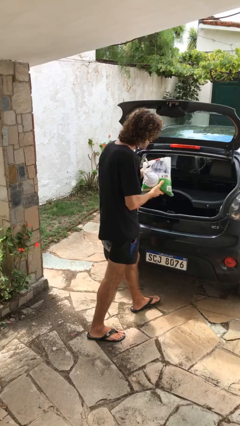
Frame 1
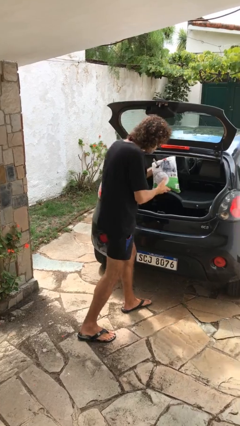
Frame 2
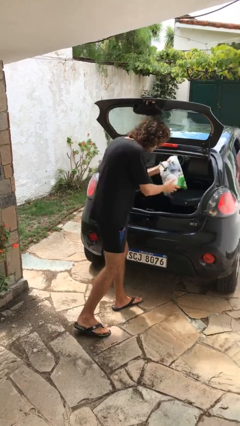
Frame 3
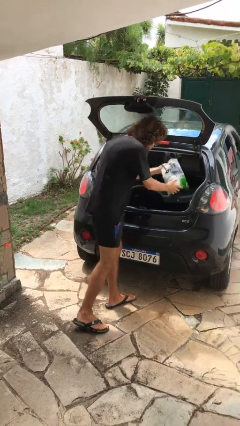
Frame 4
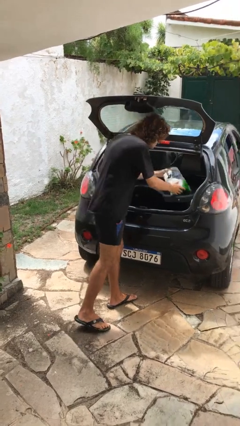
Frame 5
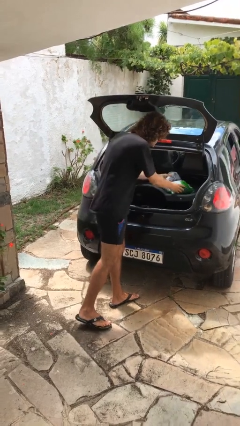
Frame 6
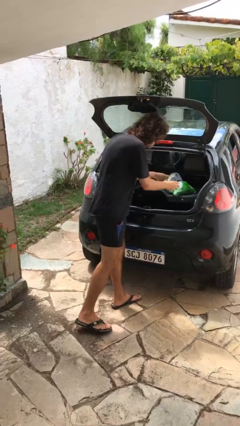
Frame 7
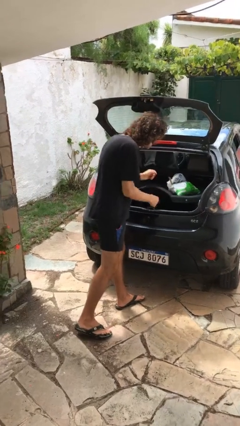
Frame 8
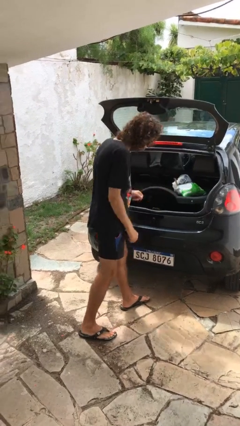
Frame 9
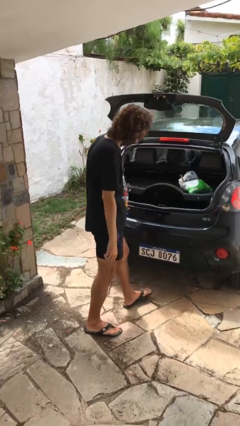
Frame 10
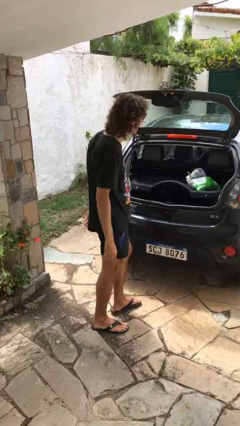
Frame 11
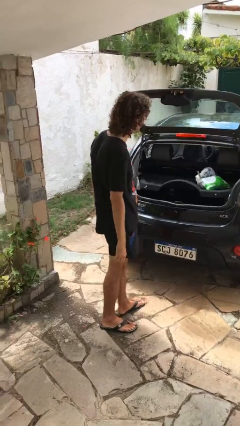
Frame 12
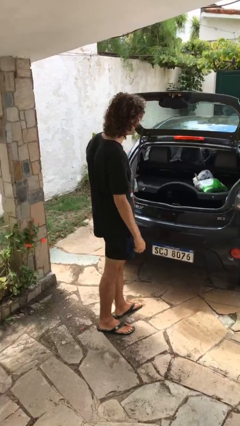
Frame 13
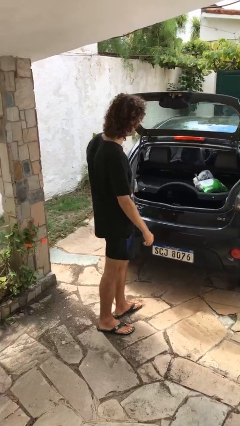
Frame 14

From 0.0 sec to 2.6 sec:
person loads car

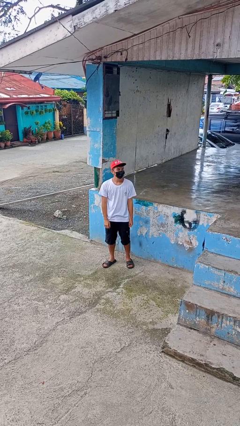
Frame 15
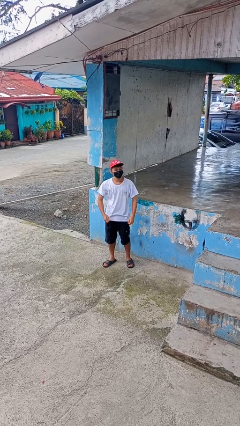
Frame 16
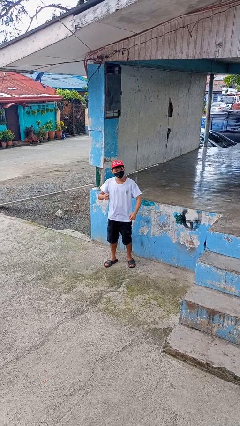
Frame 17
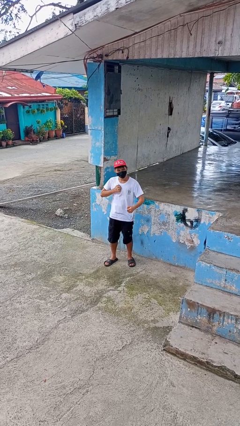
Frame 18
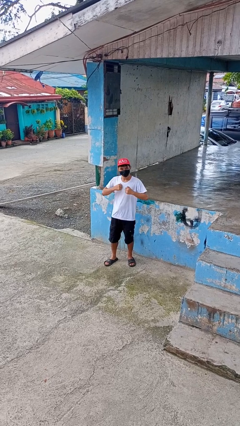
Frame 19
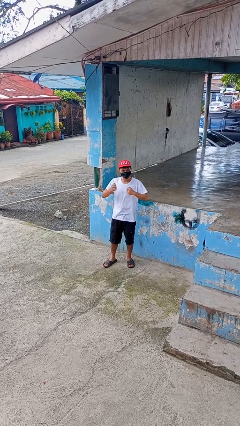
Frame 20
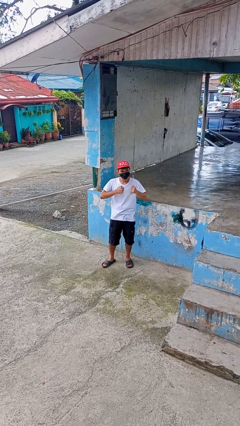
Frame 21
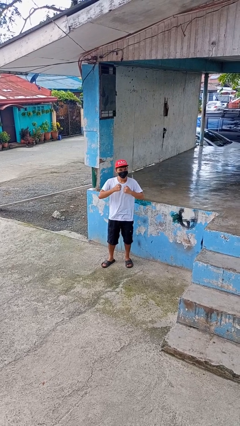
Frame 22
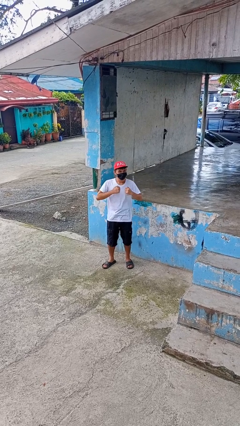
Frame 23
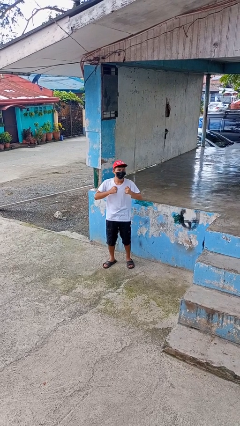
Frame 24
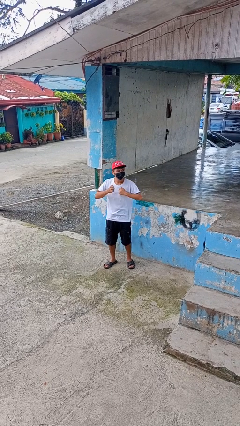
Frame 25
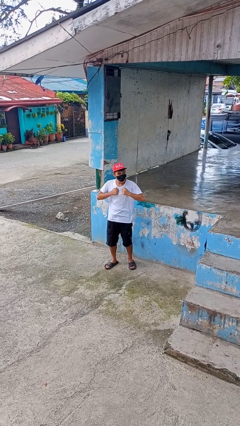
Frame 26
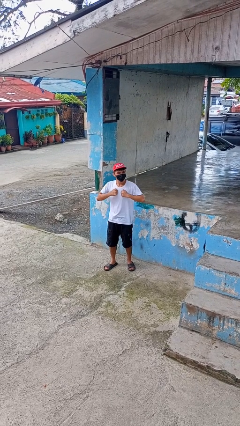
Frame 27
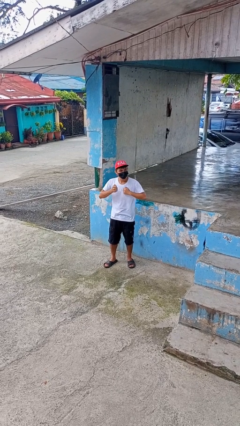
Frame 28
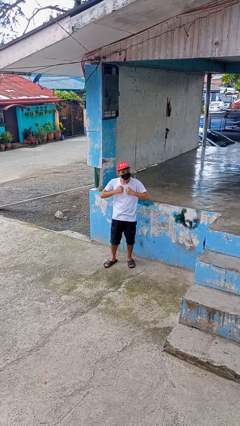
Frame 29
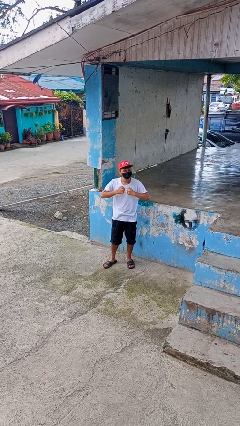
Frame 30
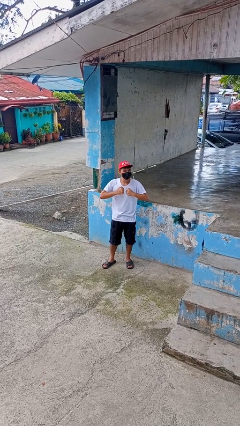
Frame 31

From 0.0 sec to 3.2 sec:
person drums on chest

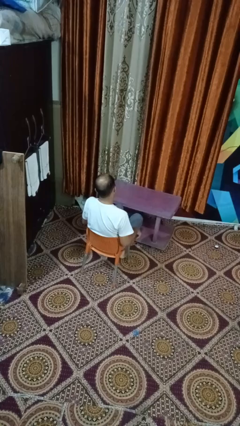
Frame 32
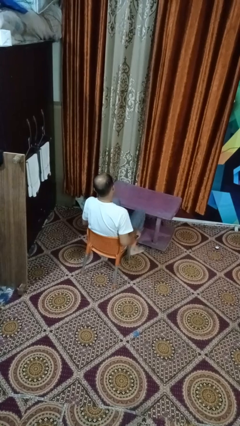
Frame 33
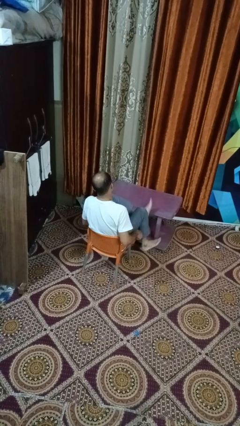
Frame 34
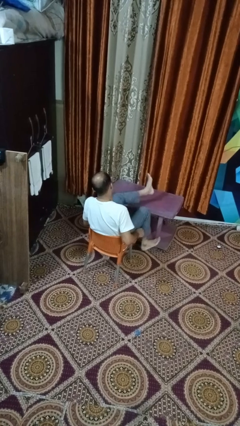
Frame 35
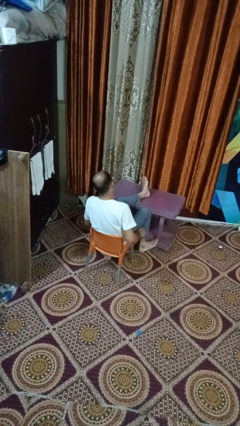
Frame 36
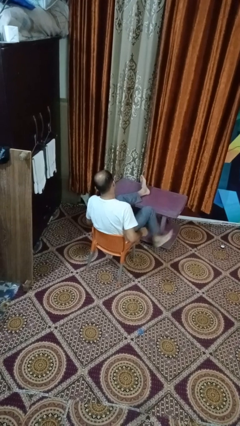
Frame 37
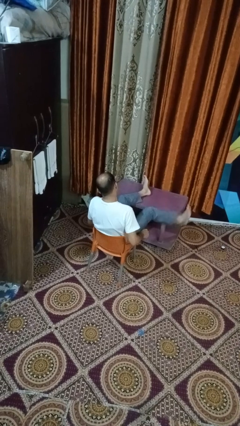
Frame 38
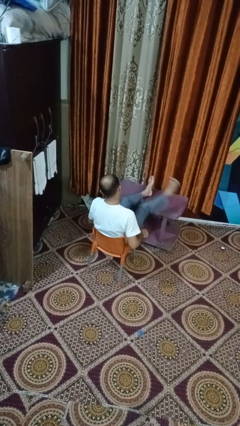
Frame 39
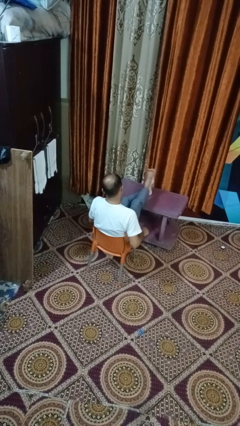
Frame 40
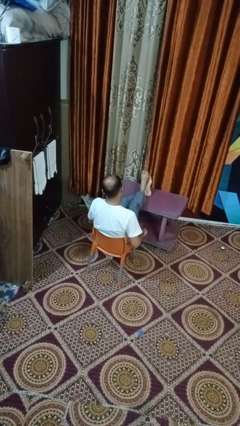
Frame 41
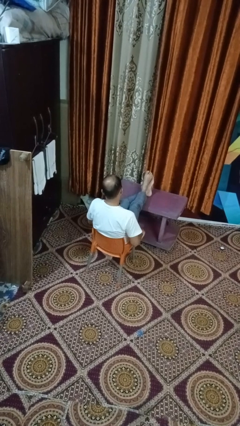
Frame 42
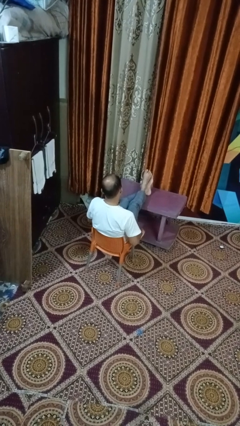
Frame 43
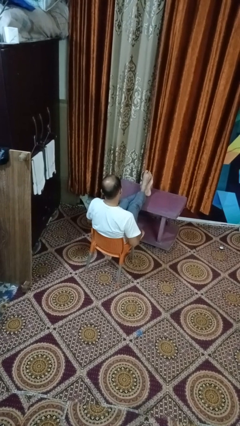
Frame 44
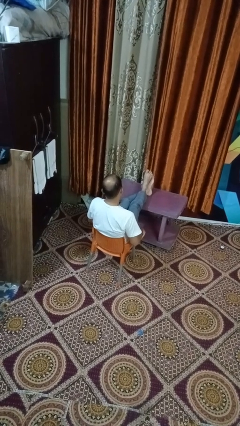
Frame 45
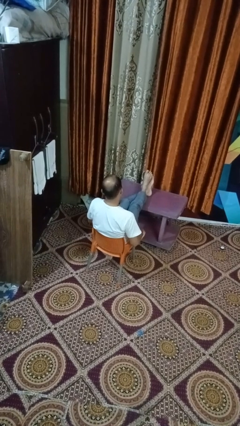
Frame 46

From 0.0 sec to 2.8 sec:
person puts feet up

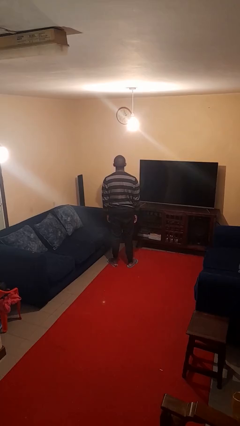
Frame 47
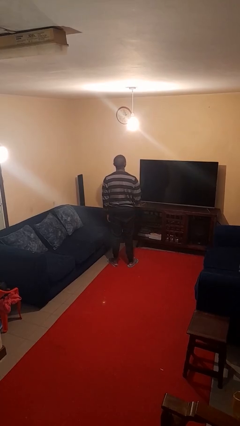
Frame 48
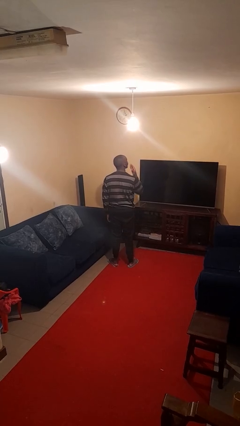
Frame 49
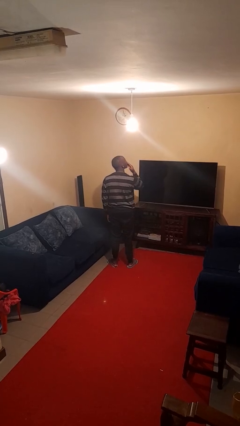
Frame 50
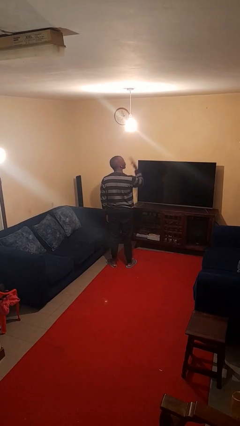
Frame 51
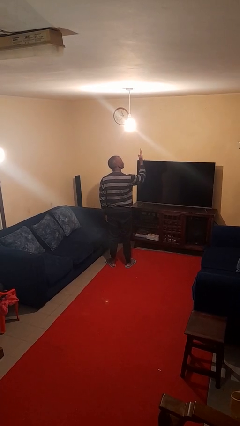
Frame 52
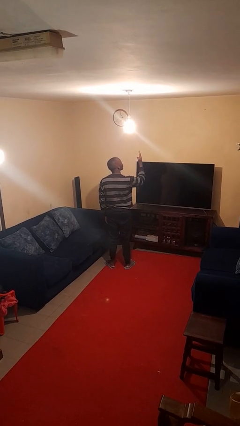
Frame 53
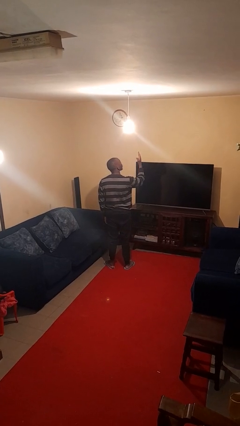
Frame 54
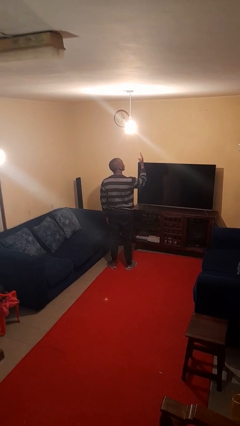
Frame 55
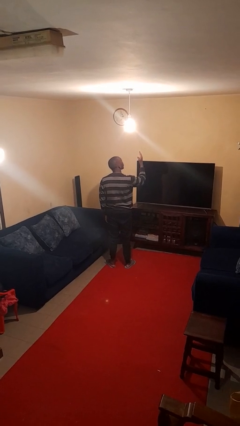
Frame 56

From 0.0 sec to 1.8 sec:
person gestures blow kiss

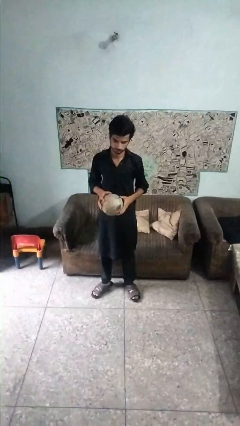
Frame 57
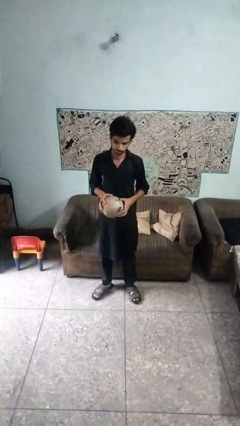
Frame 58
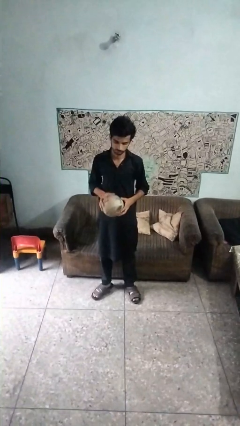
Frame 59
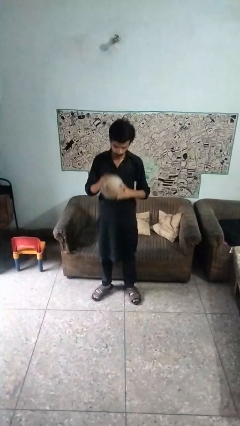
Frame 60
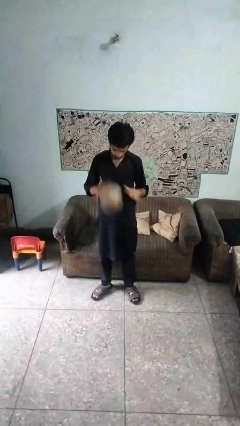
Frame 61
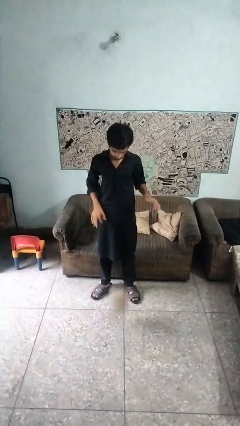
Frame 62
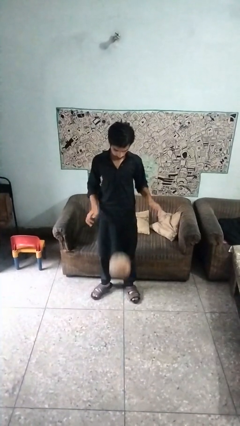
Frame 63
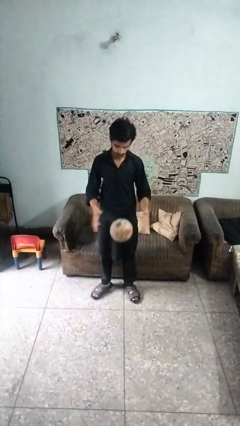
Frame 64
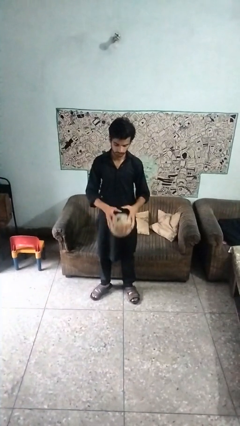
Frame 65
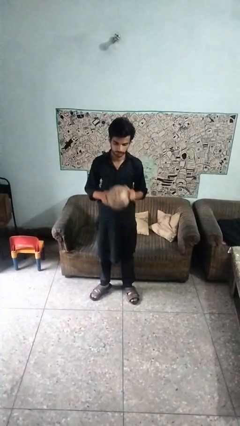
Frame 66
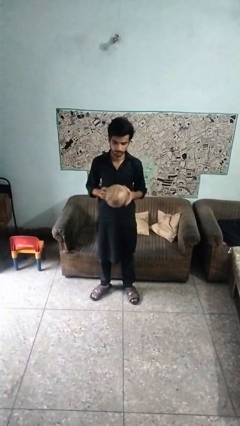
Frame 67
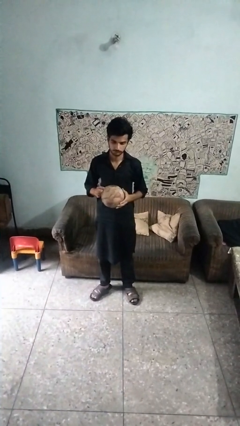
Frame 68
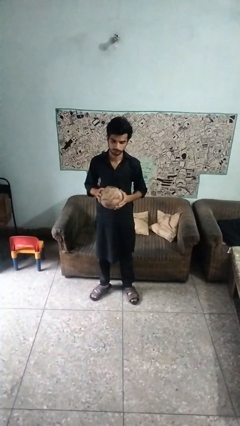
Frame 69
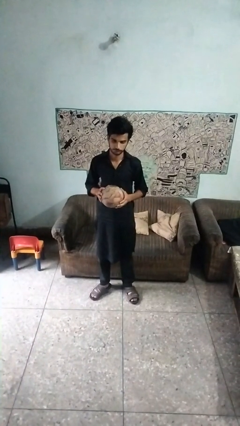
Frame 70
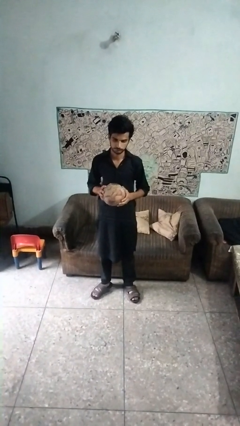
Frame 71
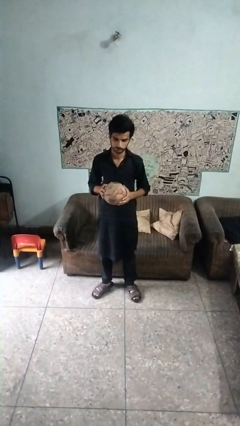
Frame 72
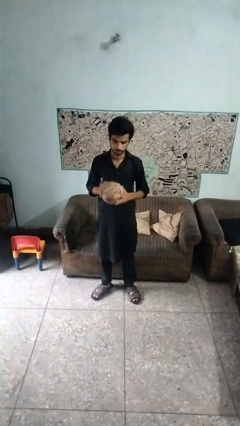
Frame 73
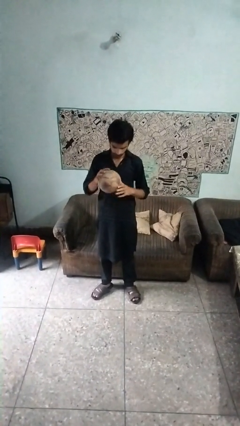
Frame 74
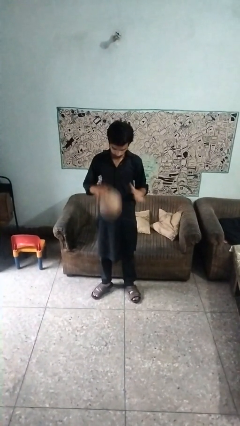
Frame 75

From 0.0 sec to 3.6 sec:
person puts on hoodie

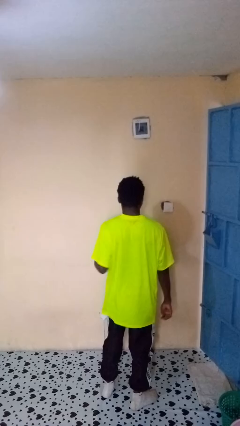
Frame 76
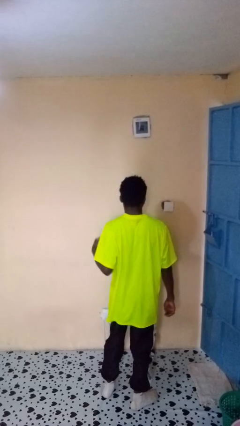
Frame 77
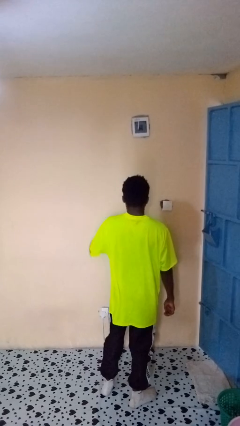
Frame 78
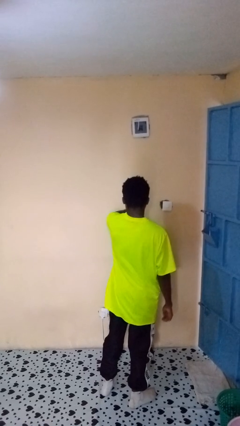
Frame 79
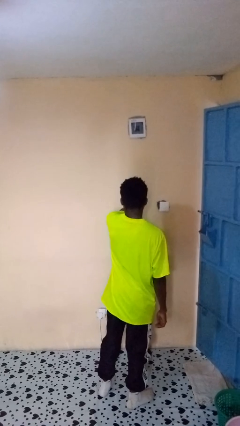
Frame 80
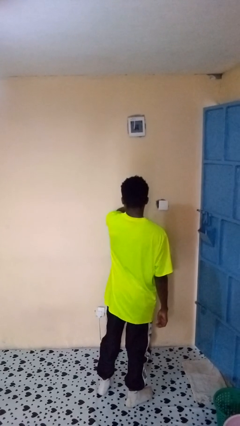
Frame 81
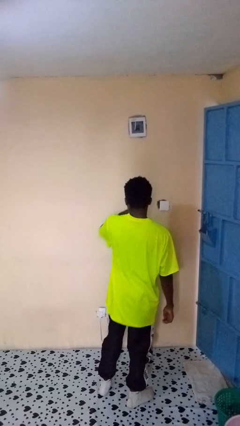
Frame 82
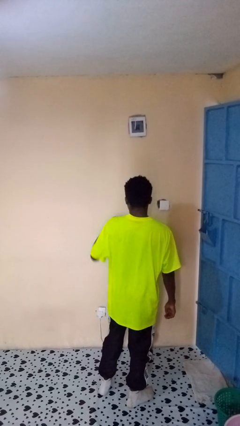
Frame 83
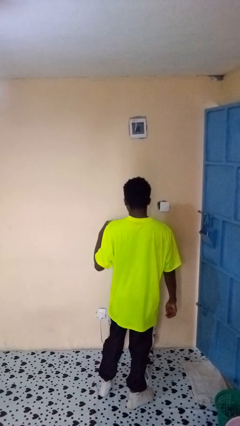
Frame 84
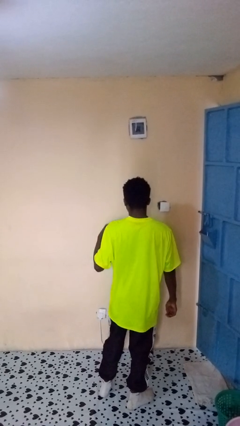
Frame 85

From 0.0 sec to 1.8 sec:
person punches

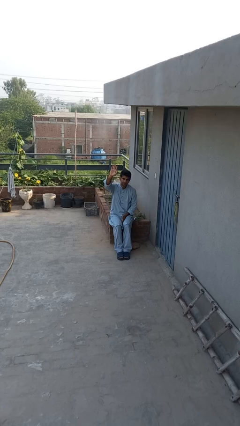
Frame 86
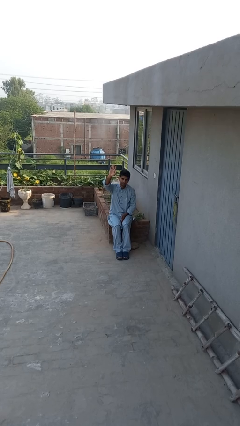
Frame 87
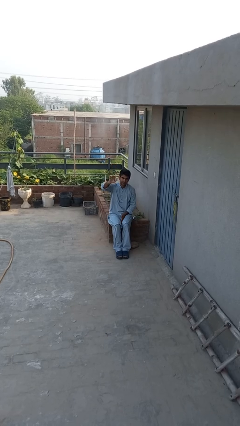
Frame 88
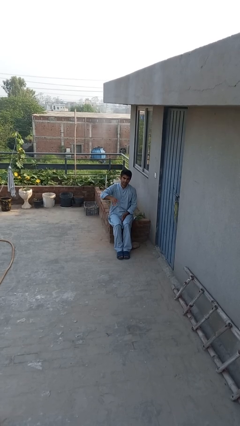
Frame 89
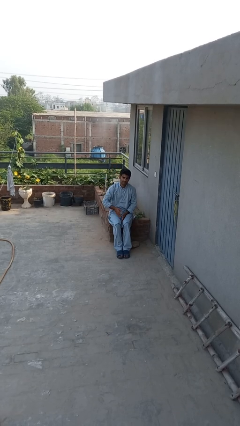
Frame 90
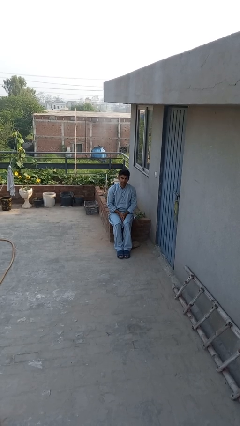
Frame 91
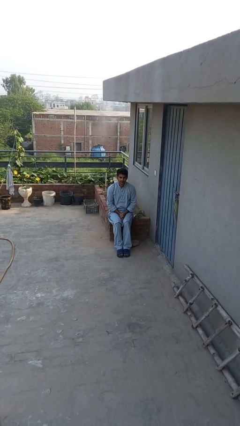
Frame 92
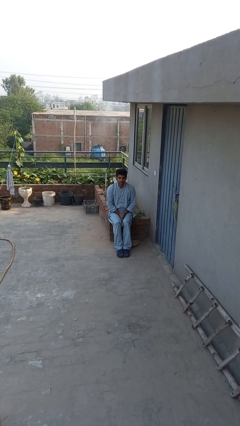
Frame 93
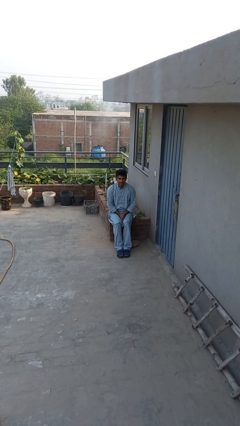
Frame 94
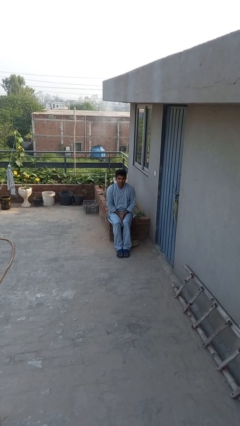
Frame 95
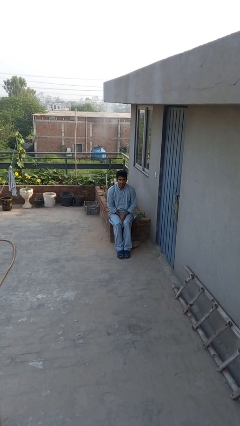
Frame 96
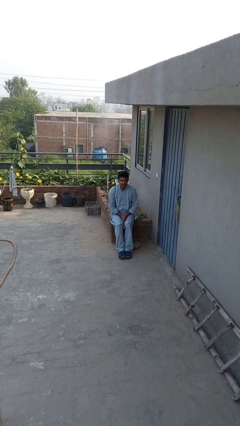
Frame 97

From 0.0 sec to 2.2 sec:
person gestures lower hand
